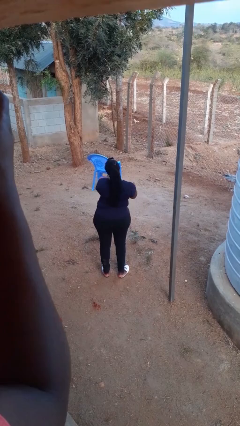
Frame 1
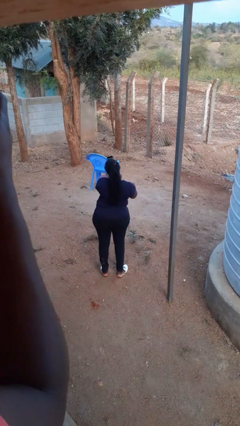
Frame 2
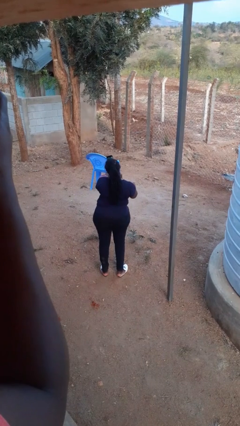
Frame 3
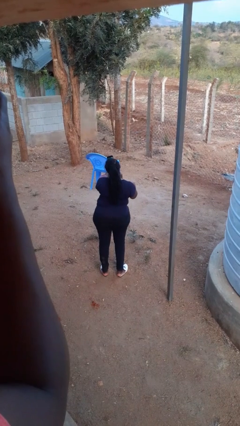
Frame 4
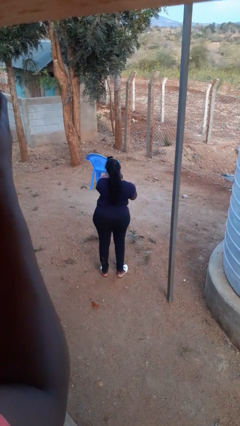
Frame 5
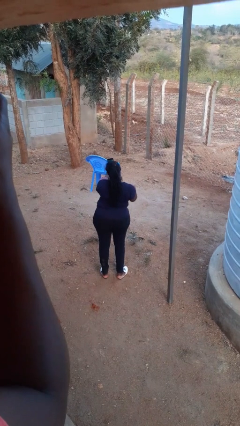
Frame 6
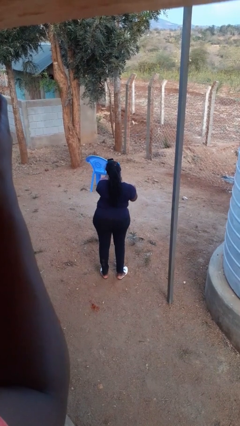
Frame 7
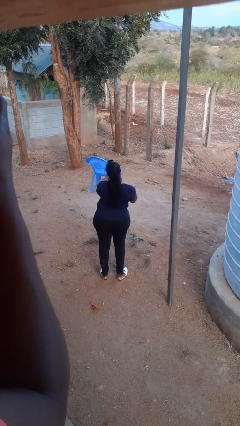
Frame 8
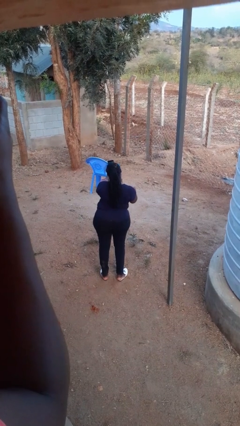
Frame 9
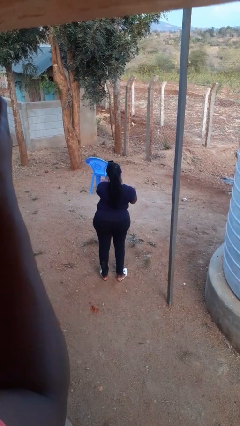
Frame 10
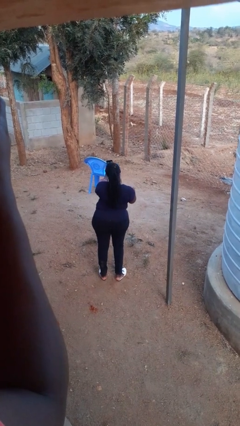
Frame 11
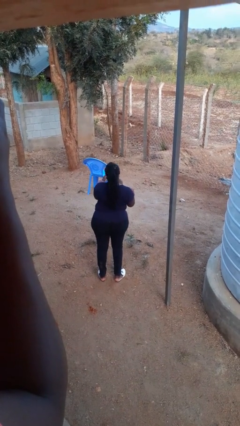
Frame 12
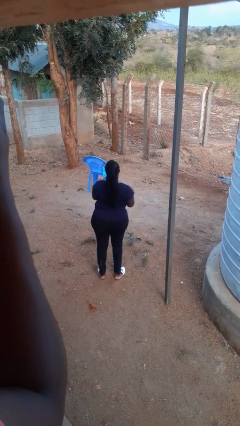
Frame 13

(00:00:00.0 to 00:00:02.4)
person takes selfie

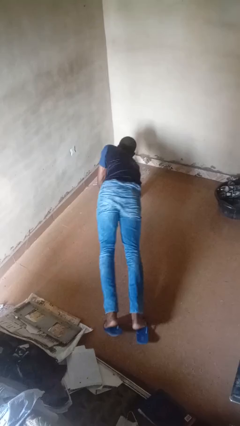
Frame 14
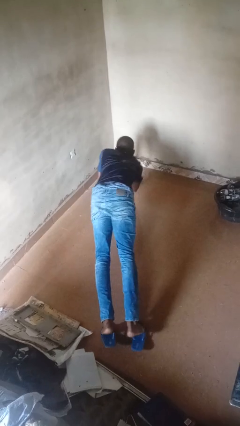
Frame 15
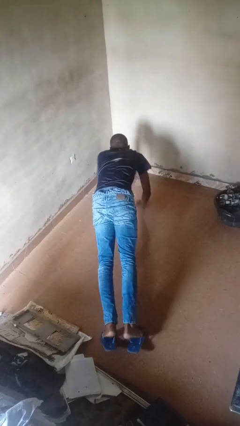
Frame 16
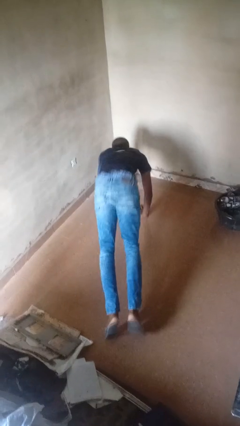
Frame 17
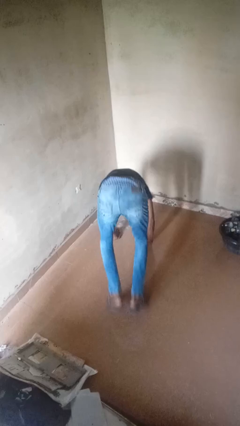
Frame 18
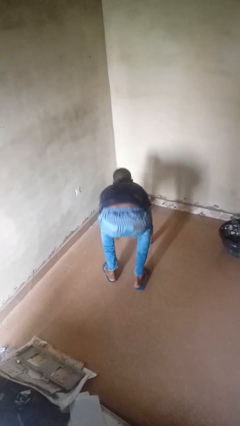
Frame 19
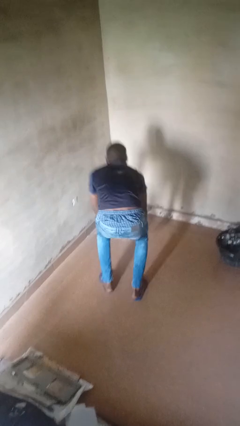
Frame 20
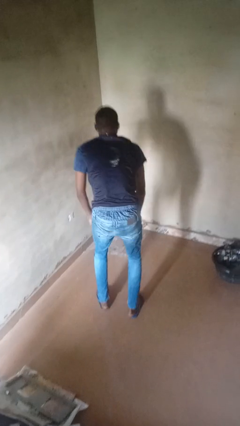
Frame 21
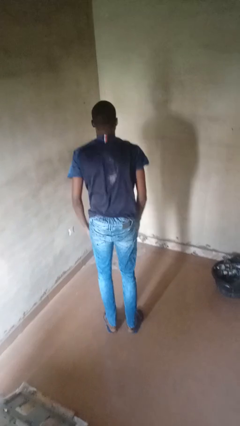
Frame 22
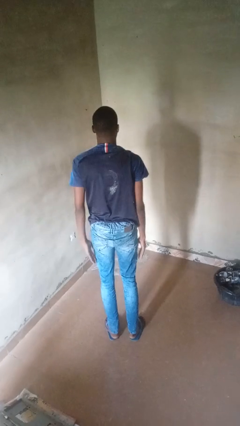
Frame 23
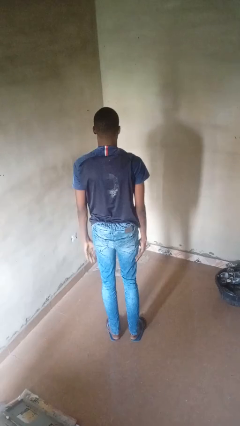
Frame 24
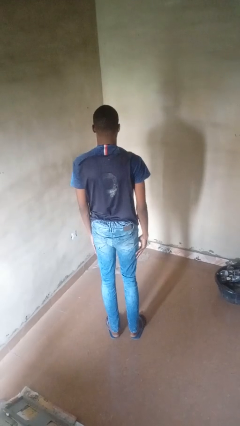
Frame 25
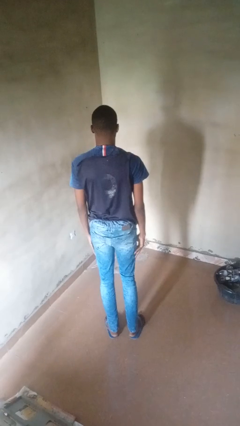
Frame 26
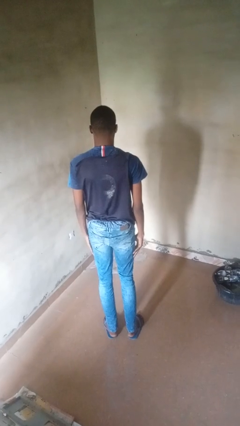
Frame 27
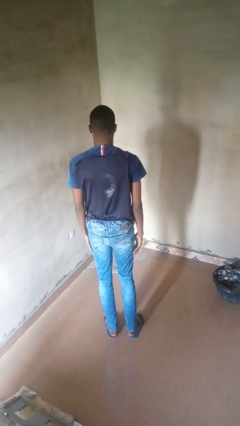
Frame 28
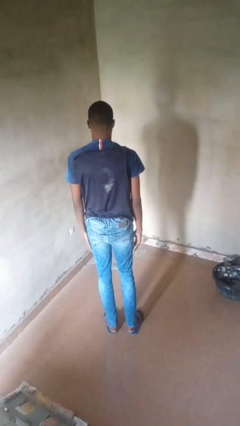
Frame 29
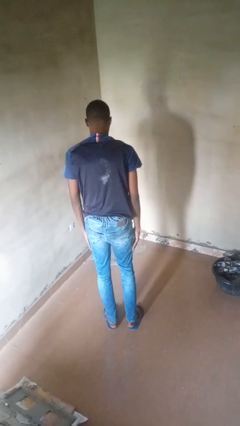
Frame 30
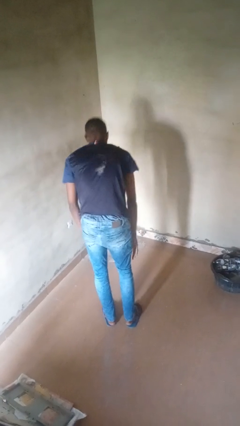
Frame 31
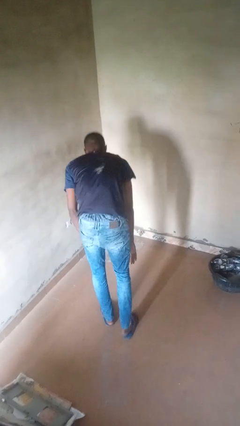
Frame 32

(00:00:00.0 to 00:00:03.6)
person stands up from floor

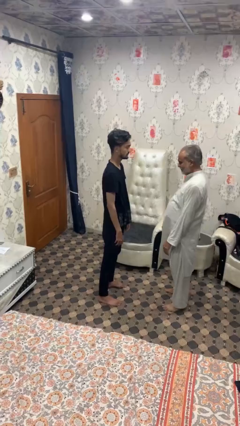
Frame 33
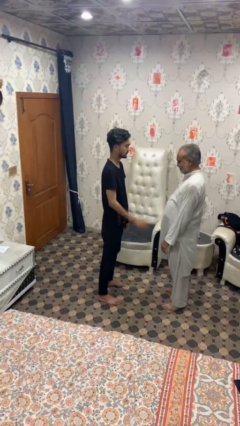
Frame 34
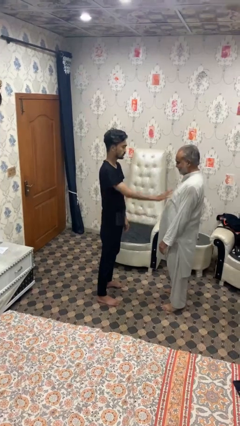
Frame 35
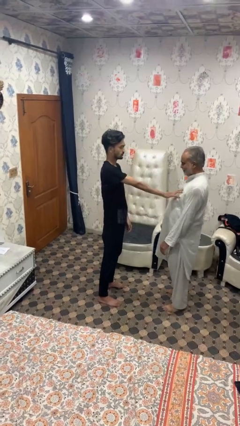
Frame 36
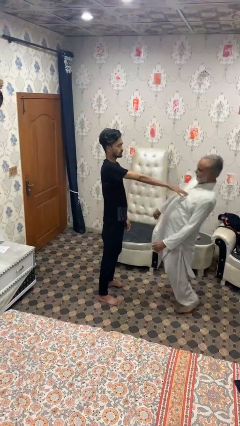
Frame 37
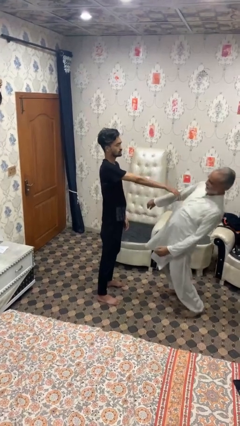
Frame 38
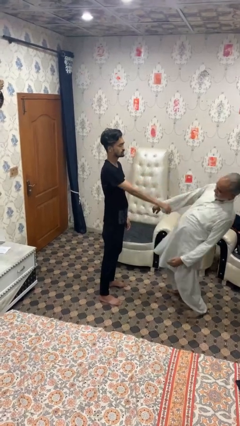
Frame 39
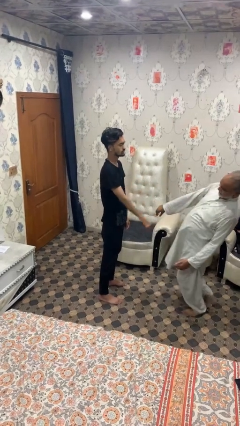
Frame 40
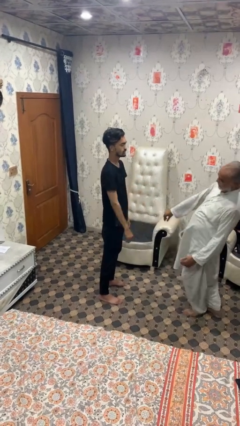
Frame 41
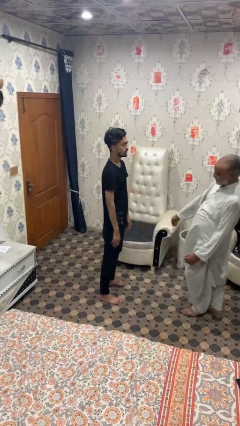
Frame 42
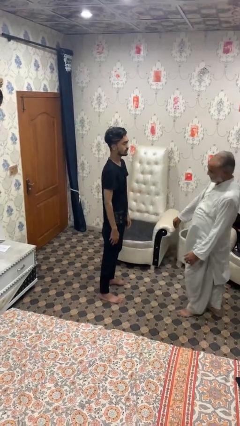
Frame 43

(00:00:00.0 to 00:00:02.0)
person shoves person

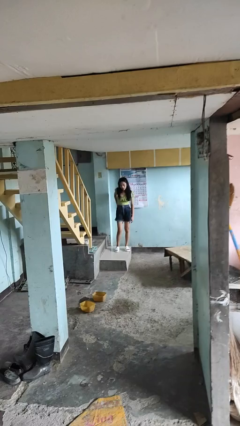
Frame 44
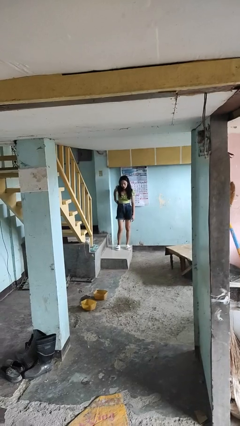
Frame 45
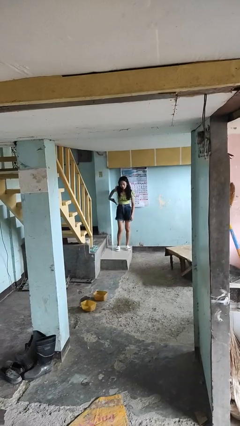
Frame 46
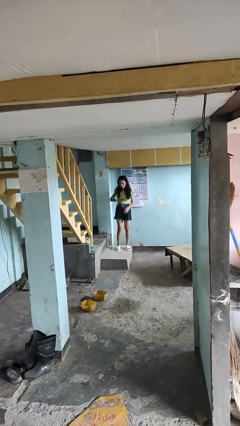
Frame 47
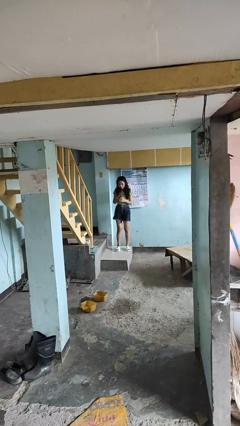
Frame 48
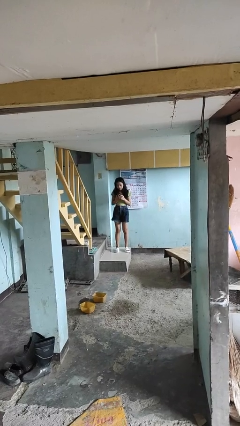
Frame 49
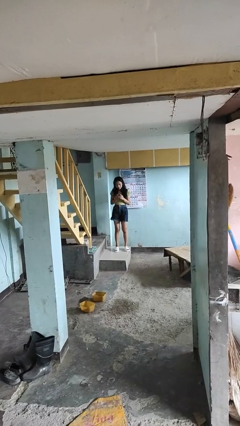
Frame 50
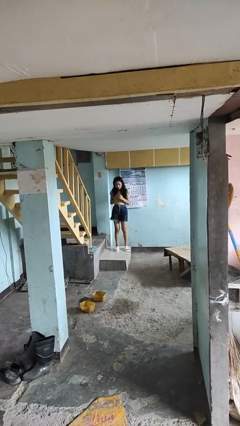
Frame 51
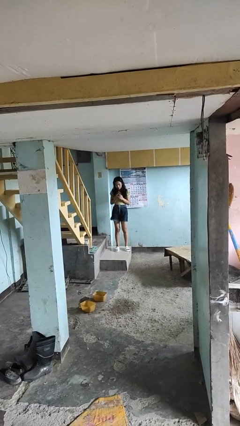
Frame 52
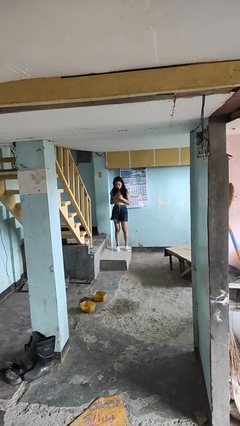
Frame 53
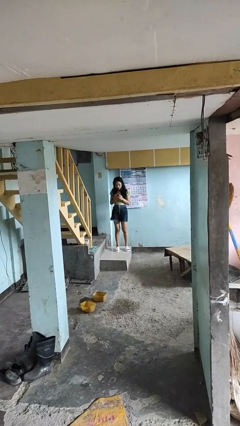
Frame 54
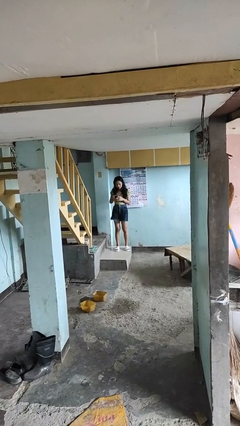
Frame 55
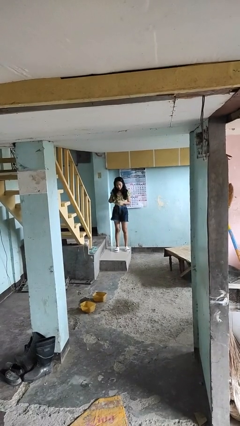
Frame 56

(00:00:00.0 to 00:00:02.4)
person takes phone from pocket

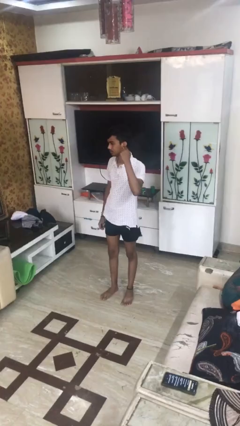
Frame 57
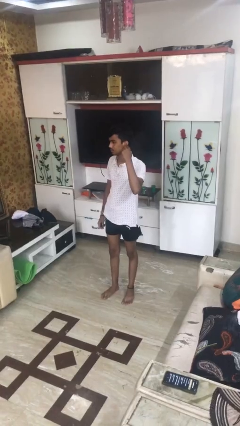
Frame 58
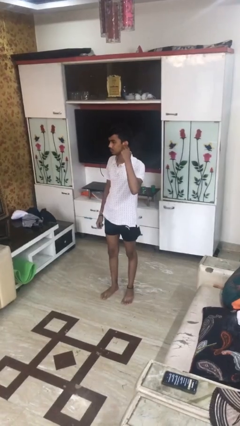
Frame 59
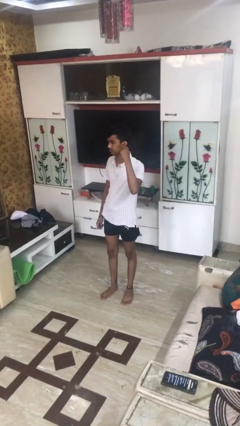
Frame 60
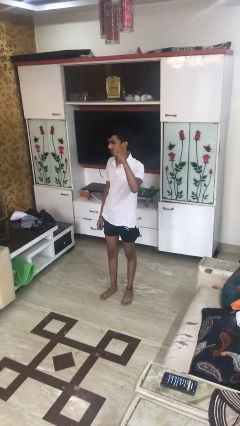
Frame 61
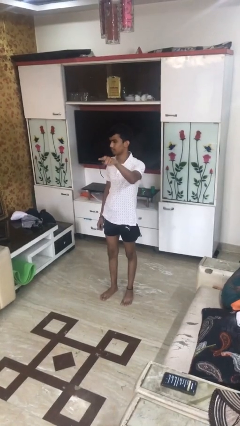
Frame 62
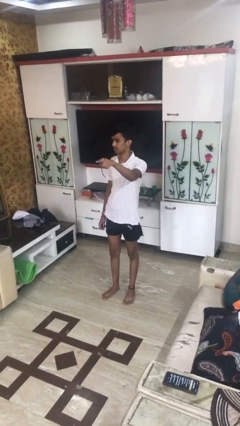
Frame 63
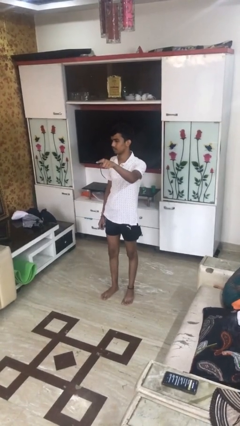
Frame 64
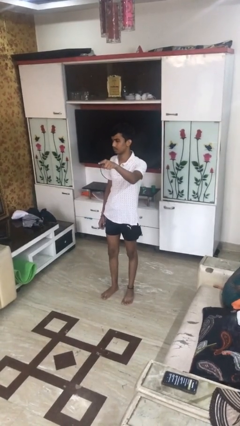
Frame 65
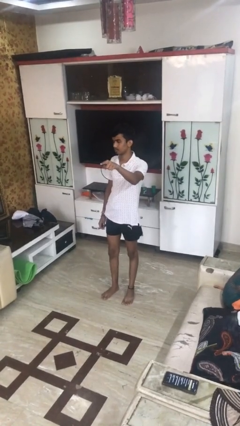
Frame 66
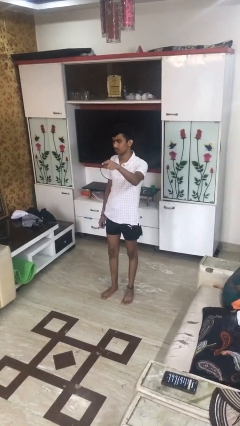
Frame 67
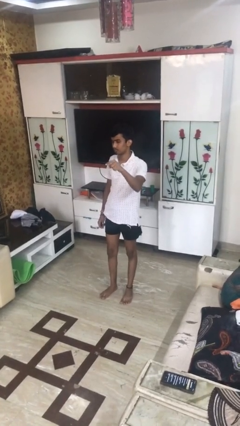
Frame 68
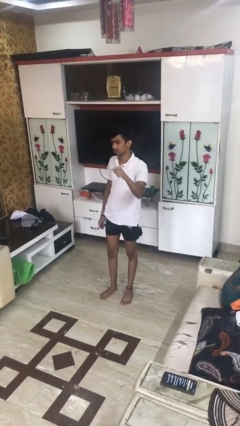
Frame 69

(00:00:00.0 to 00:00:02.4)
person gestures listen closely

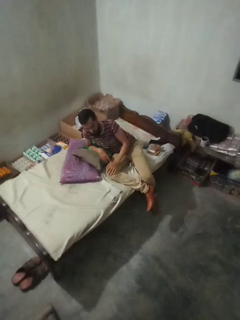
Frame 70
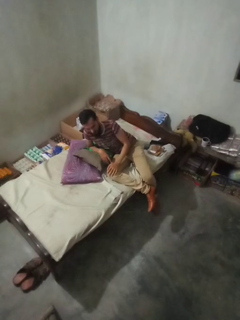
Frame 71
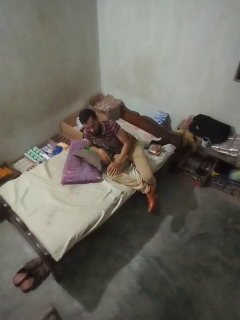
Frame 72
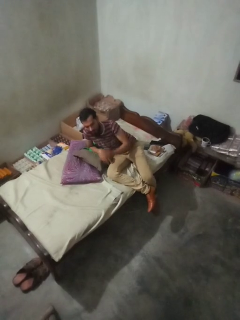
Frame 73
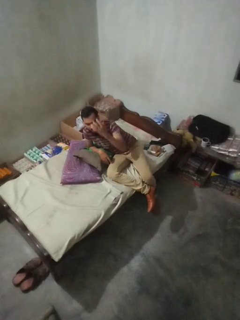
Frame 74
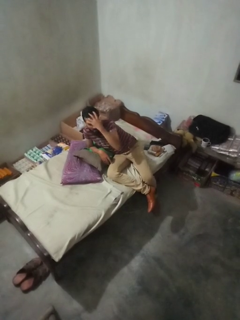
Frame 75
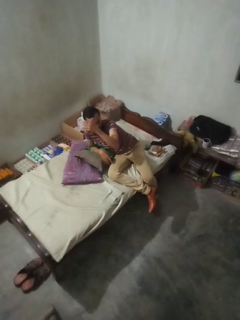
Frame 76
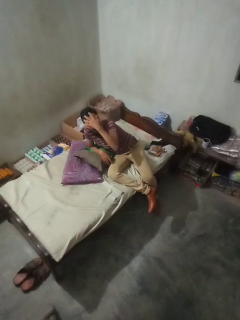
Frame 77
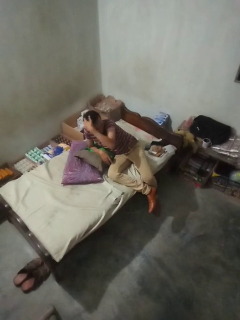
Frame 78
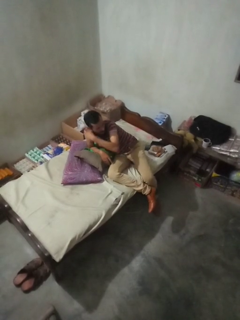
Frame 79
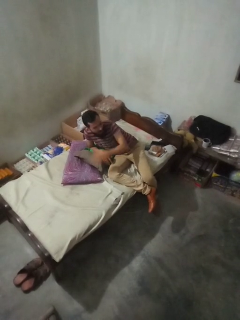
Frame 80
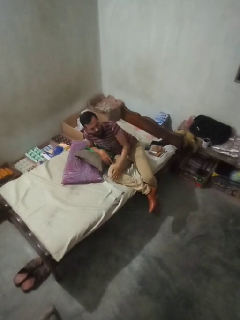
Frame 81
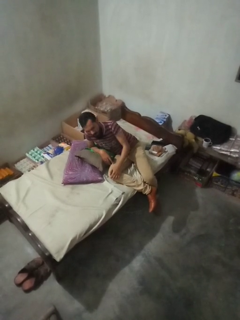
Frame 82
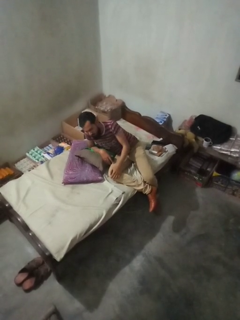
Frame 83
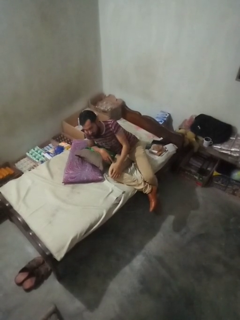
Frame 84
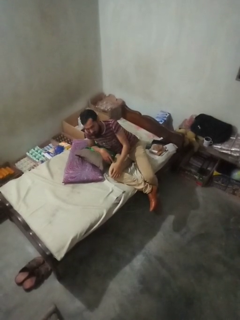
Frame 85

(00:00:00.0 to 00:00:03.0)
person strokes hair

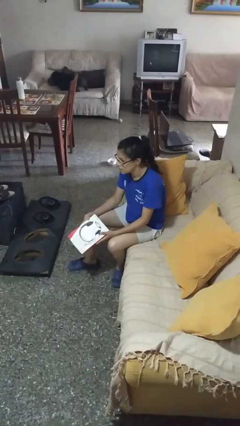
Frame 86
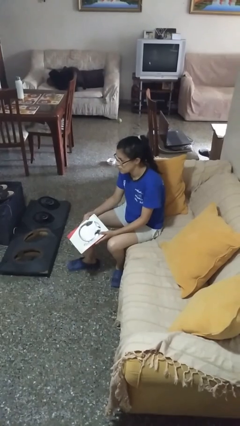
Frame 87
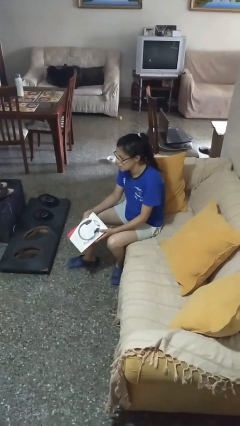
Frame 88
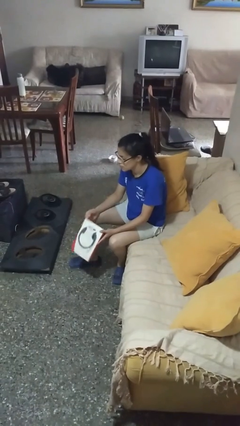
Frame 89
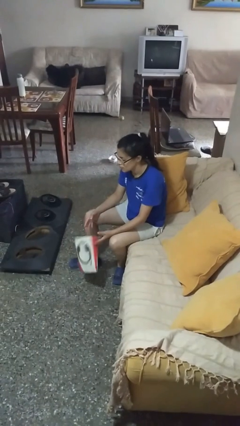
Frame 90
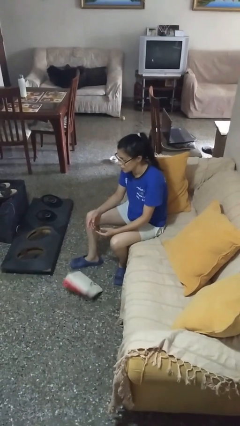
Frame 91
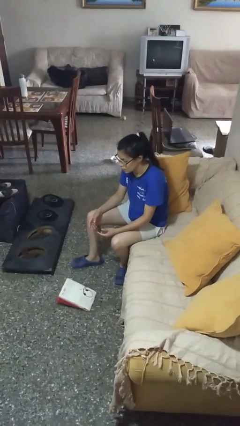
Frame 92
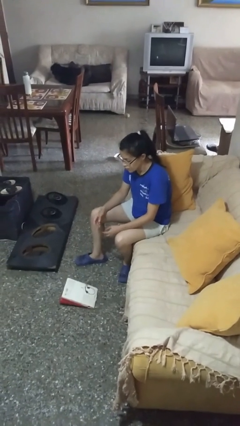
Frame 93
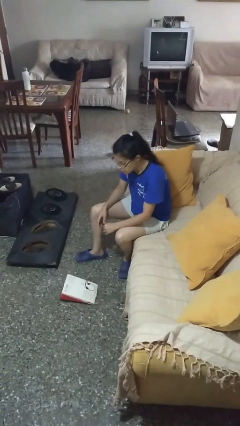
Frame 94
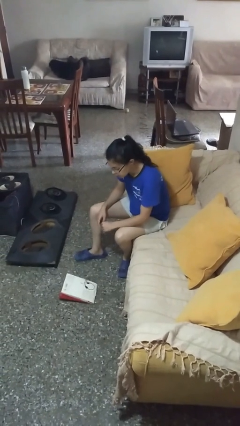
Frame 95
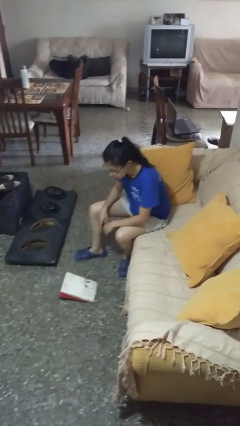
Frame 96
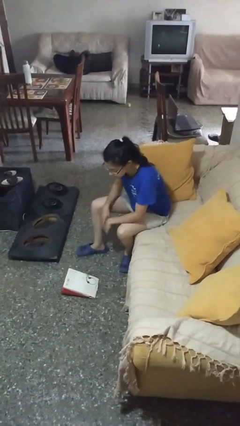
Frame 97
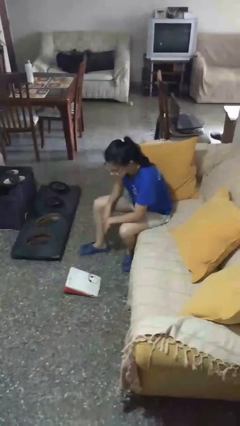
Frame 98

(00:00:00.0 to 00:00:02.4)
person drops object
